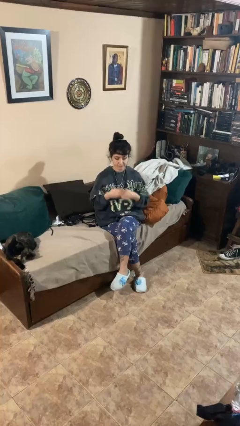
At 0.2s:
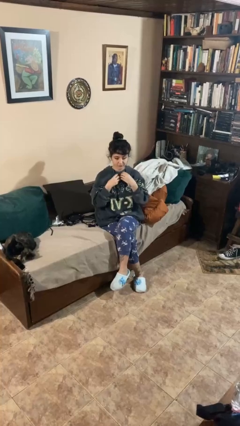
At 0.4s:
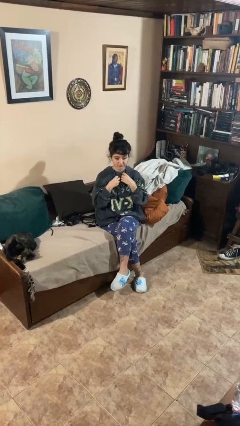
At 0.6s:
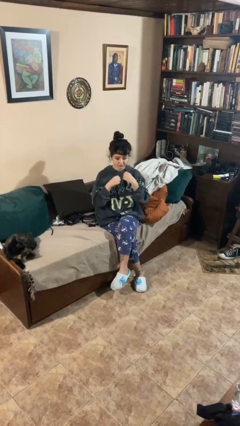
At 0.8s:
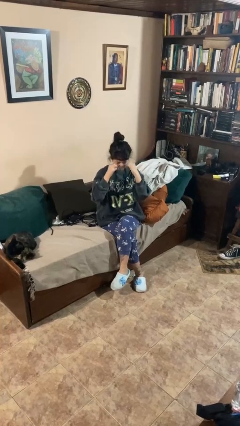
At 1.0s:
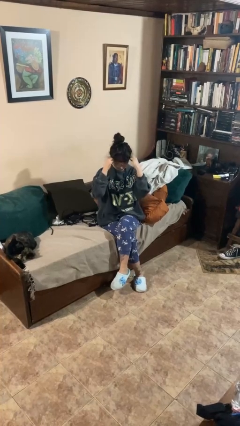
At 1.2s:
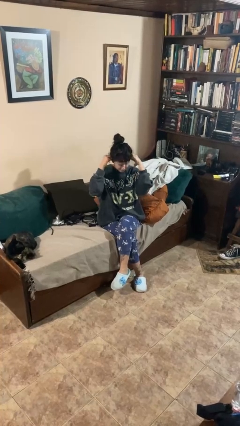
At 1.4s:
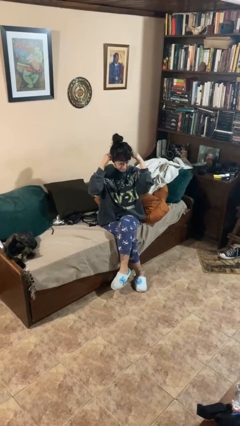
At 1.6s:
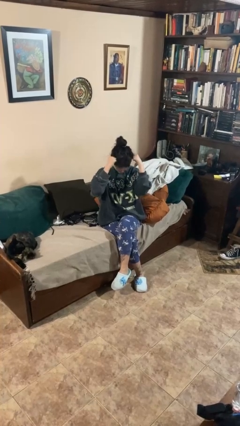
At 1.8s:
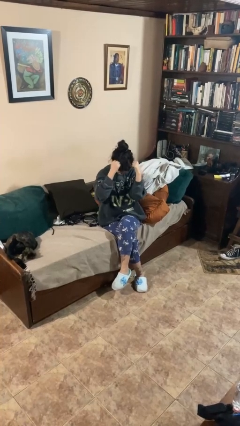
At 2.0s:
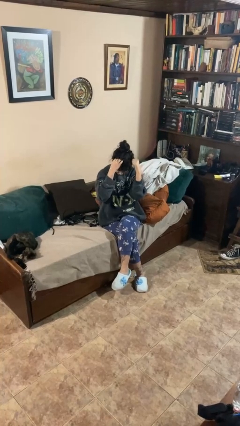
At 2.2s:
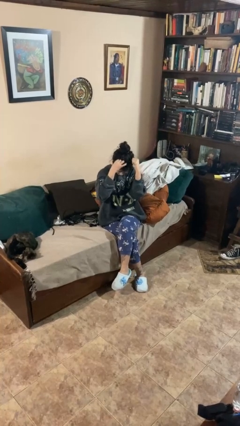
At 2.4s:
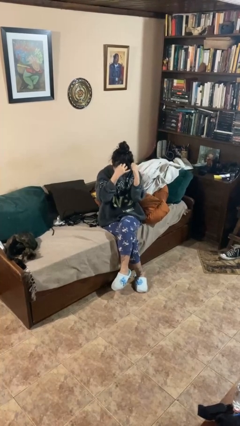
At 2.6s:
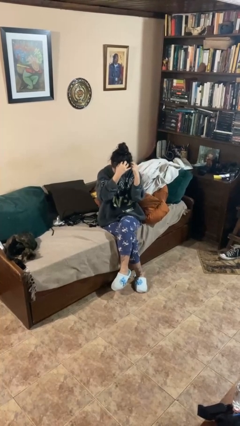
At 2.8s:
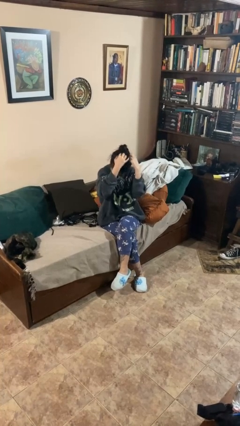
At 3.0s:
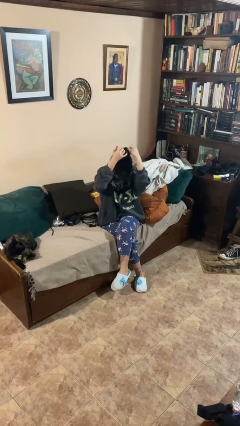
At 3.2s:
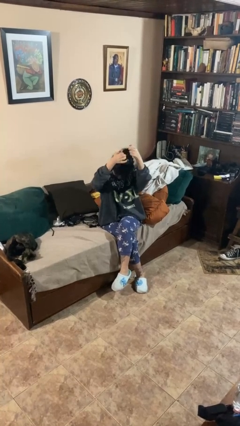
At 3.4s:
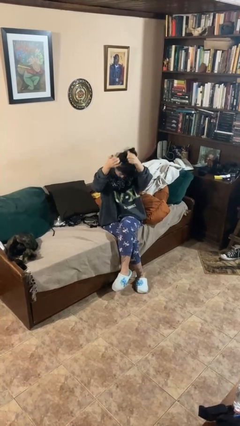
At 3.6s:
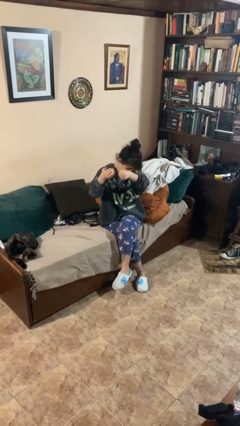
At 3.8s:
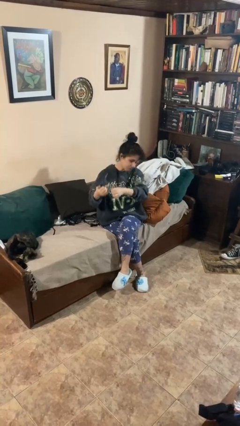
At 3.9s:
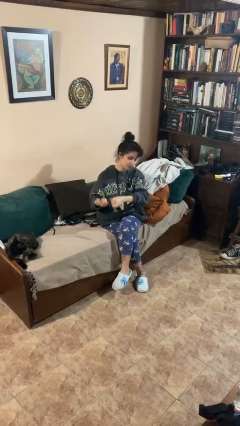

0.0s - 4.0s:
person takes off necklace

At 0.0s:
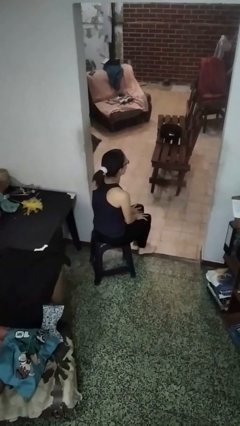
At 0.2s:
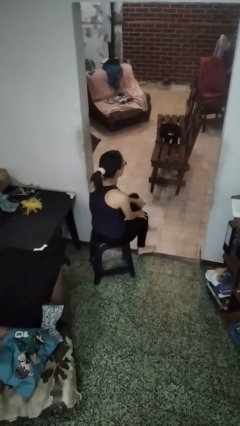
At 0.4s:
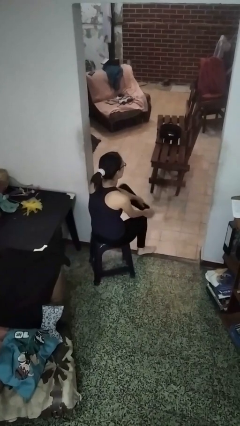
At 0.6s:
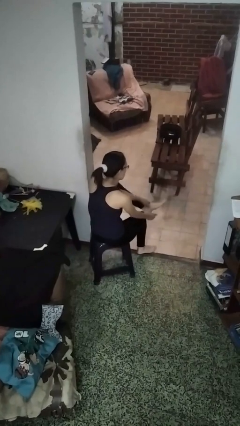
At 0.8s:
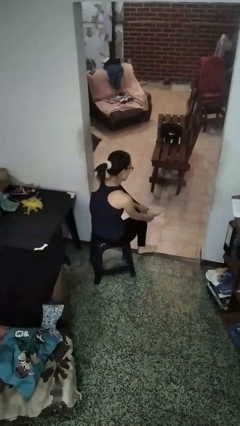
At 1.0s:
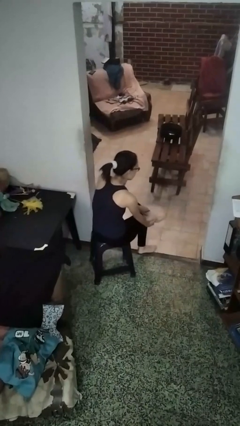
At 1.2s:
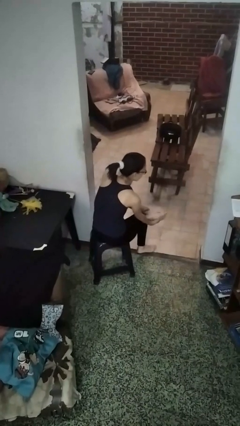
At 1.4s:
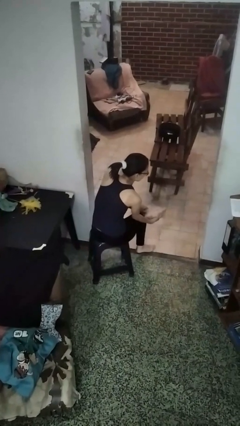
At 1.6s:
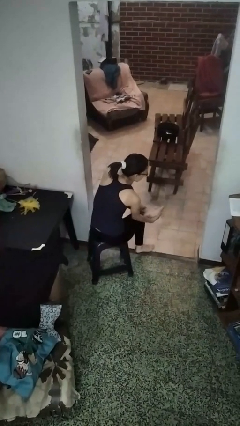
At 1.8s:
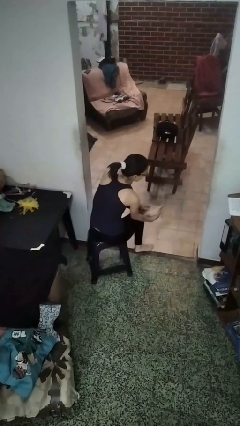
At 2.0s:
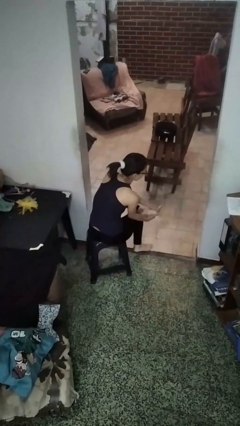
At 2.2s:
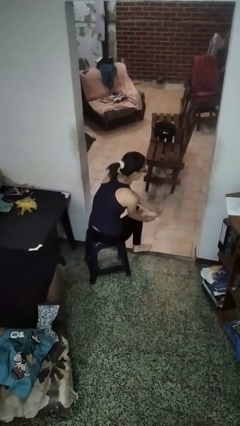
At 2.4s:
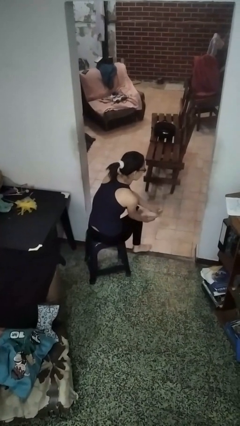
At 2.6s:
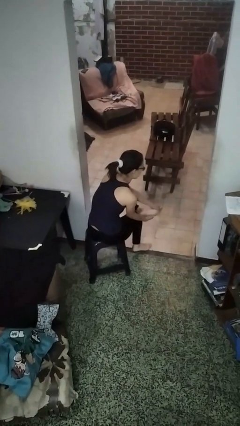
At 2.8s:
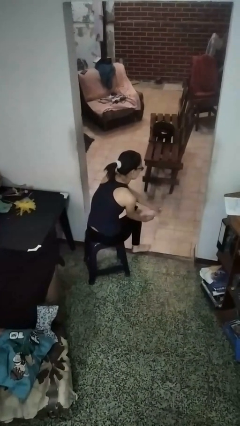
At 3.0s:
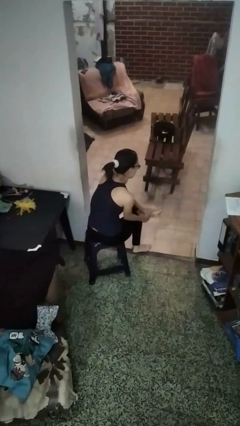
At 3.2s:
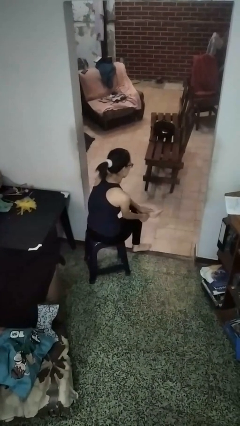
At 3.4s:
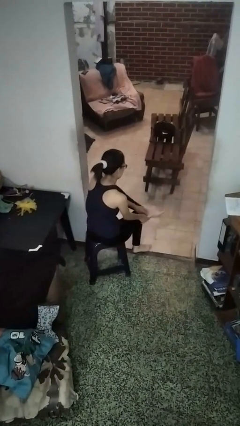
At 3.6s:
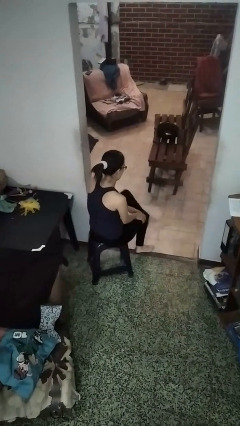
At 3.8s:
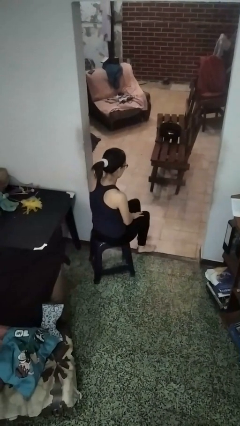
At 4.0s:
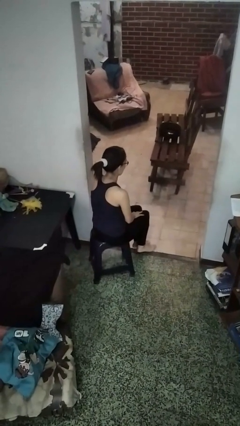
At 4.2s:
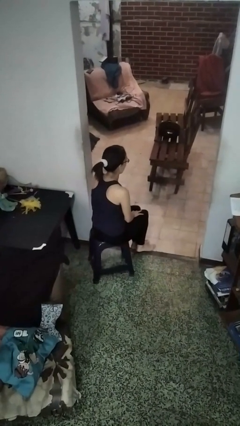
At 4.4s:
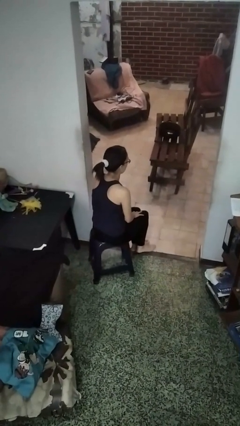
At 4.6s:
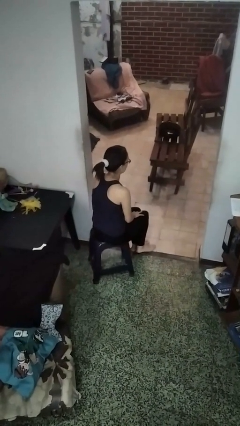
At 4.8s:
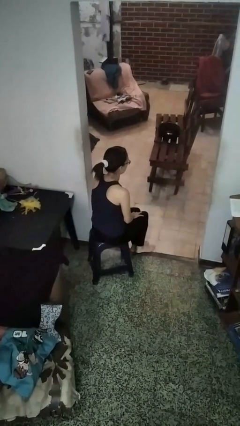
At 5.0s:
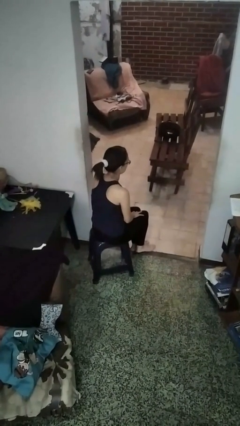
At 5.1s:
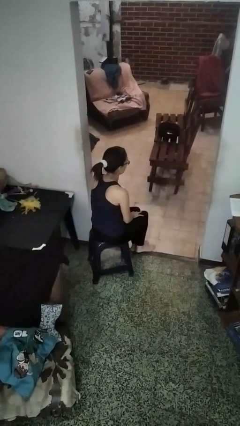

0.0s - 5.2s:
person rubs foot

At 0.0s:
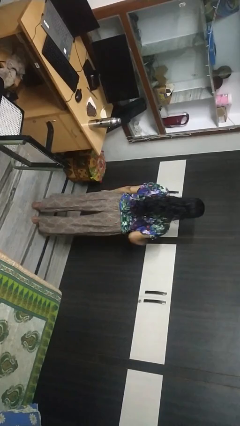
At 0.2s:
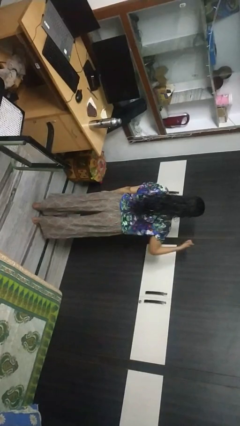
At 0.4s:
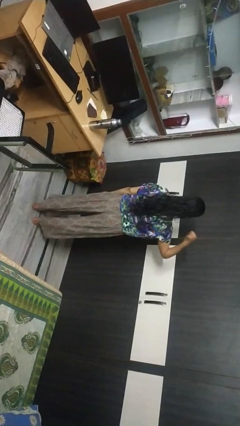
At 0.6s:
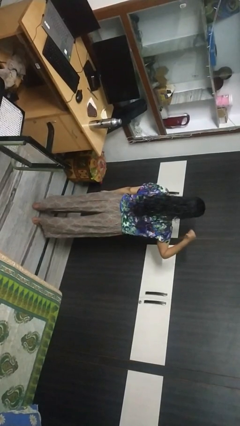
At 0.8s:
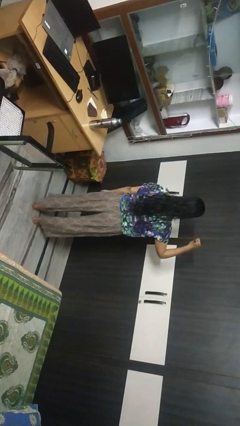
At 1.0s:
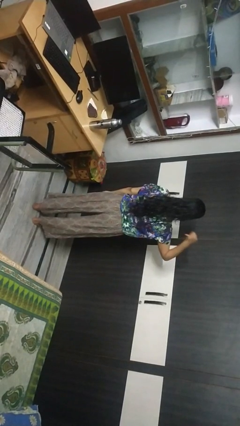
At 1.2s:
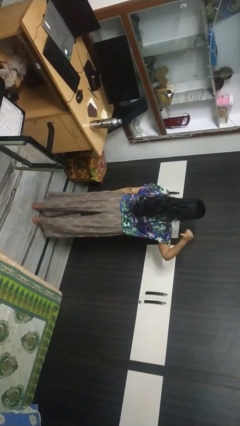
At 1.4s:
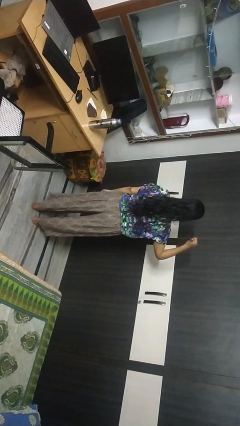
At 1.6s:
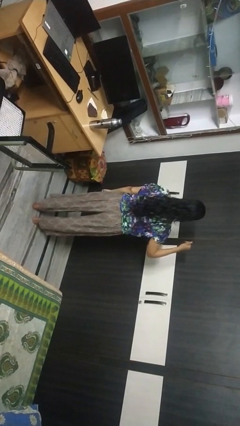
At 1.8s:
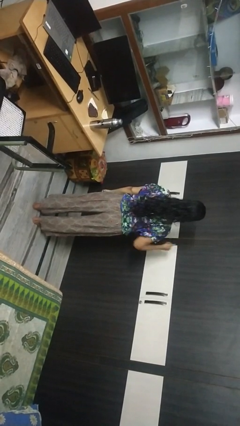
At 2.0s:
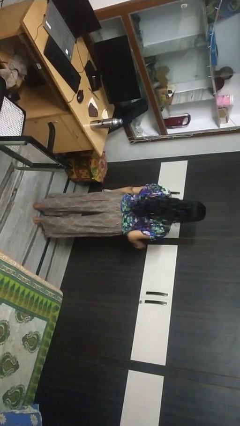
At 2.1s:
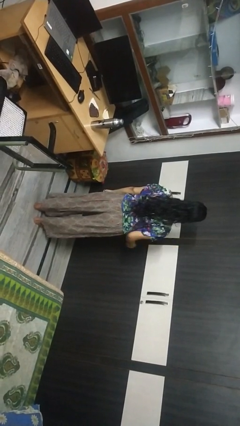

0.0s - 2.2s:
person gestures behind me

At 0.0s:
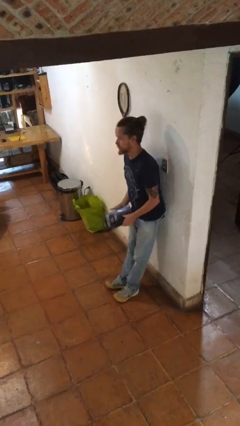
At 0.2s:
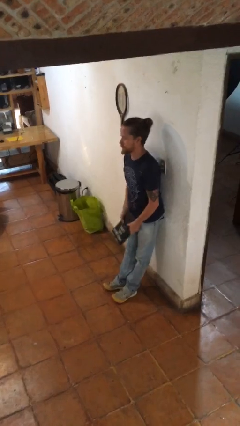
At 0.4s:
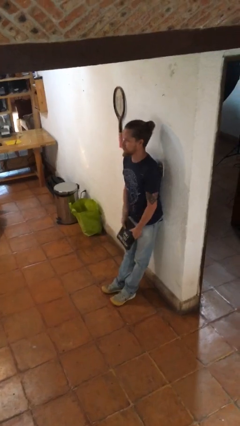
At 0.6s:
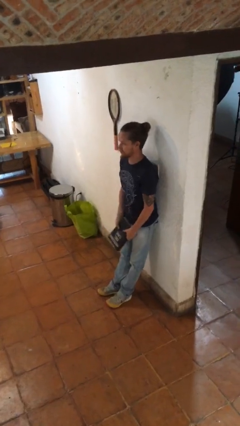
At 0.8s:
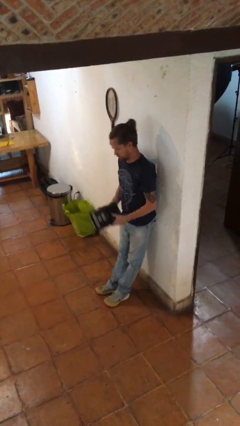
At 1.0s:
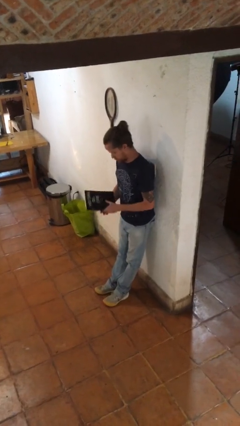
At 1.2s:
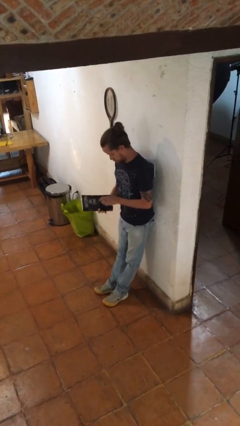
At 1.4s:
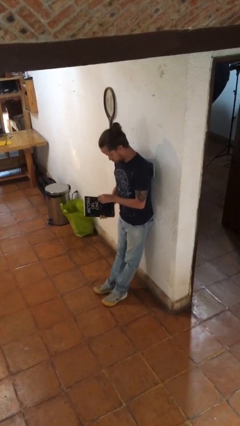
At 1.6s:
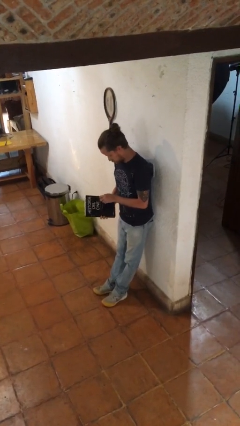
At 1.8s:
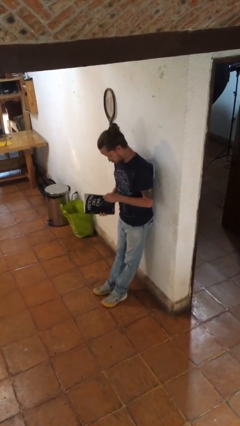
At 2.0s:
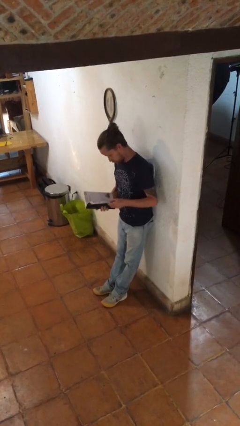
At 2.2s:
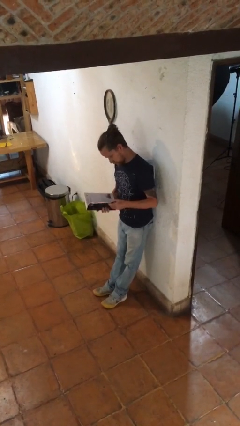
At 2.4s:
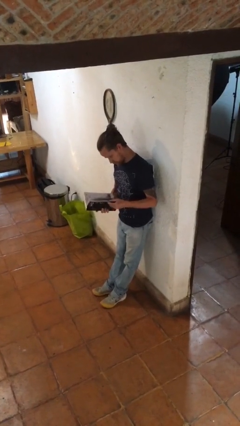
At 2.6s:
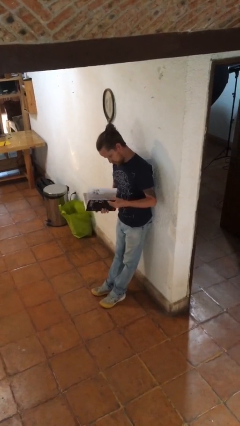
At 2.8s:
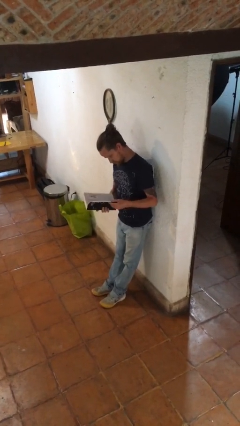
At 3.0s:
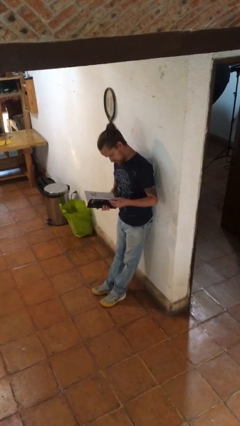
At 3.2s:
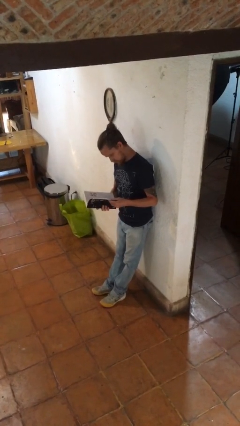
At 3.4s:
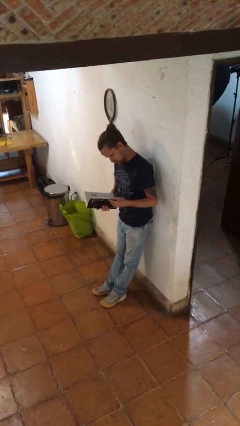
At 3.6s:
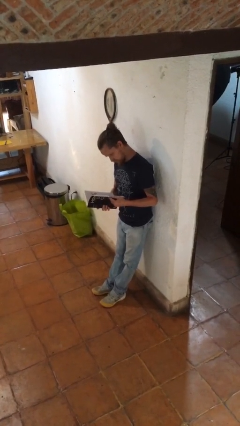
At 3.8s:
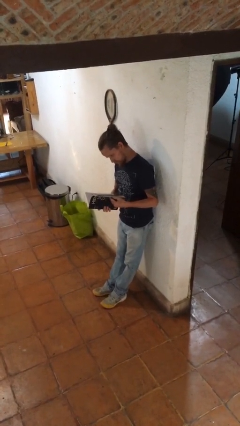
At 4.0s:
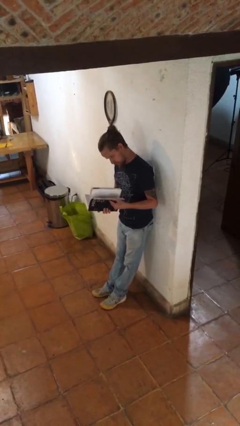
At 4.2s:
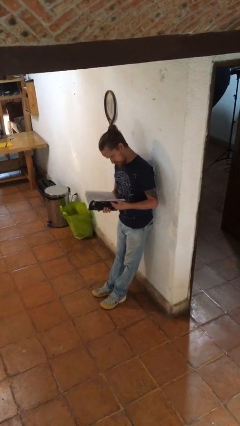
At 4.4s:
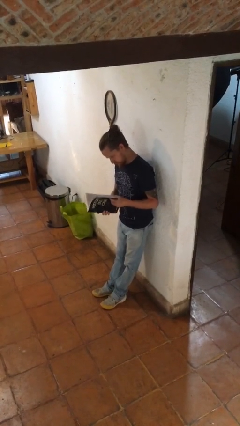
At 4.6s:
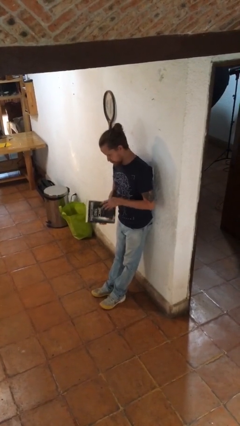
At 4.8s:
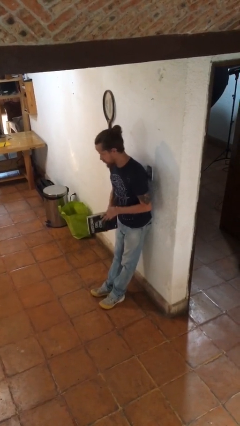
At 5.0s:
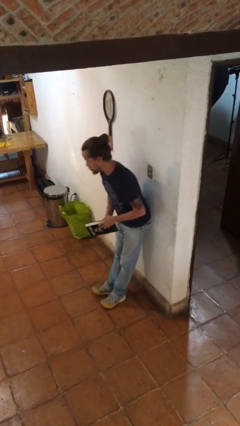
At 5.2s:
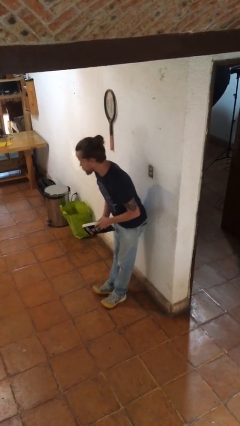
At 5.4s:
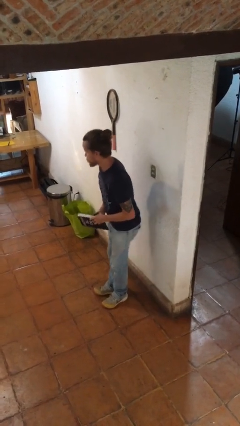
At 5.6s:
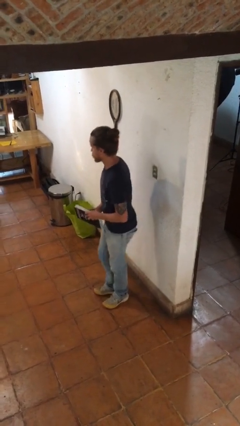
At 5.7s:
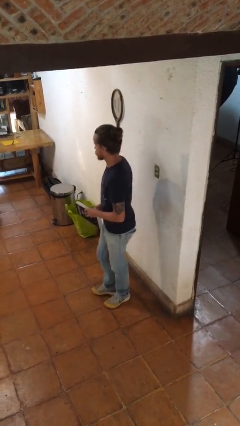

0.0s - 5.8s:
person reads book

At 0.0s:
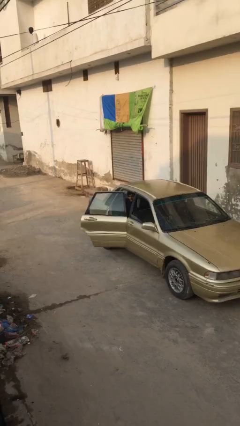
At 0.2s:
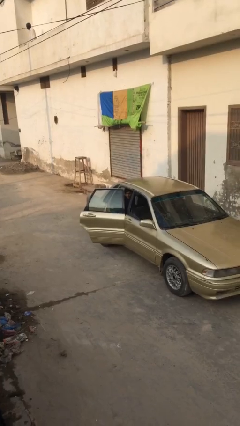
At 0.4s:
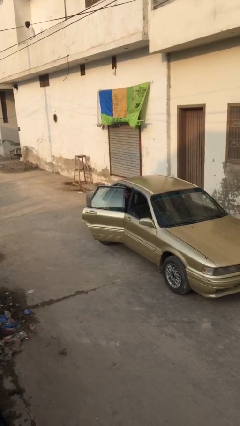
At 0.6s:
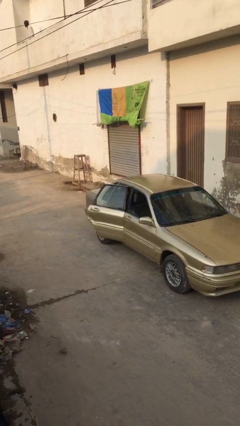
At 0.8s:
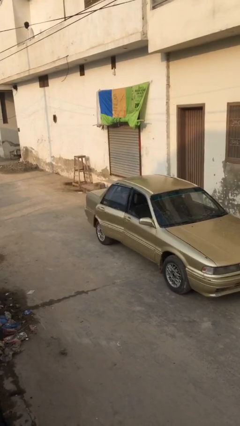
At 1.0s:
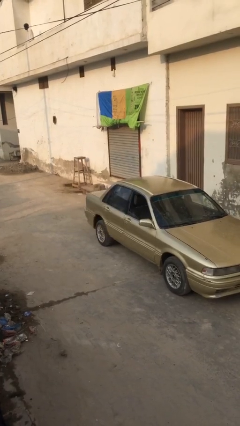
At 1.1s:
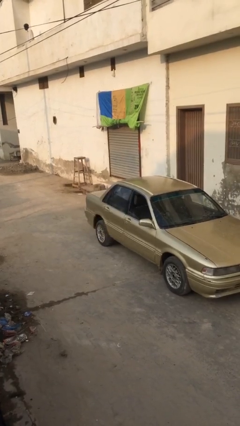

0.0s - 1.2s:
person closes car door
